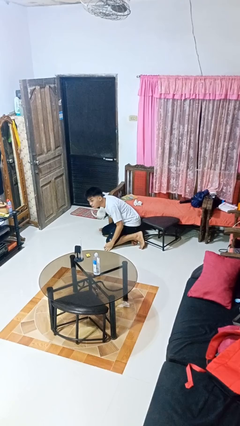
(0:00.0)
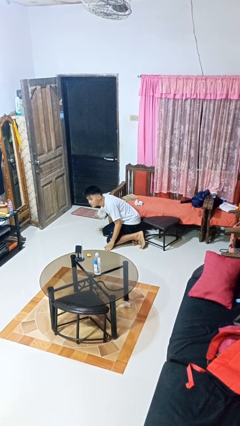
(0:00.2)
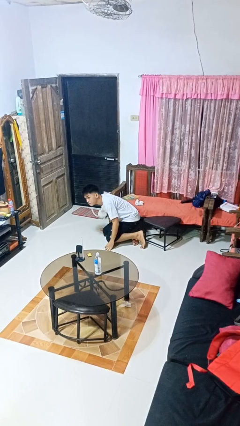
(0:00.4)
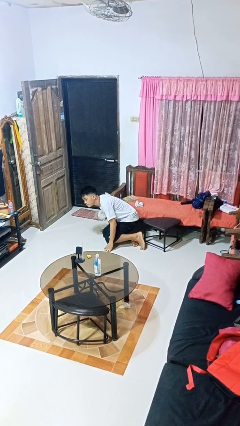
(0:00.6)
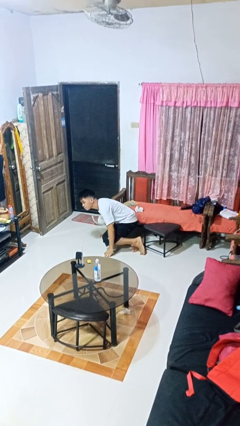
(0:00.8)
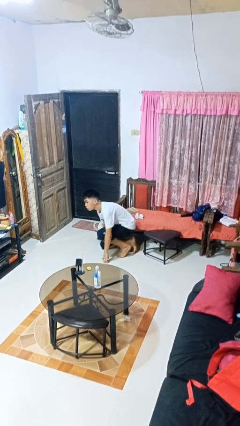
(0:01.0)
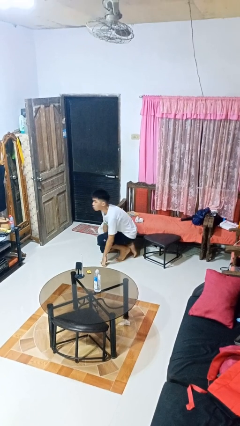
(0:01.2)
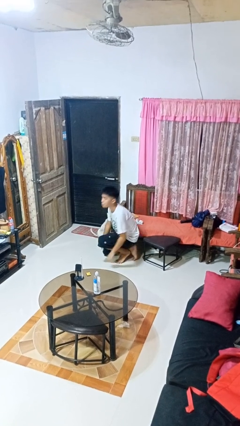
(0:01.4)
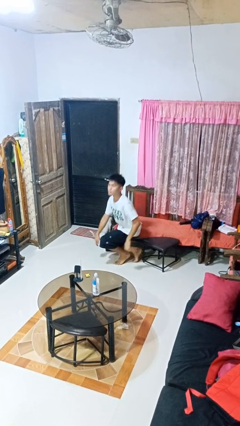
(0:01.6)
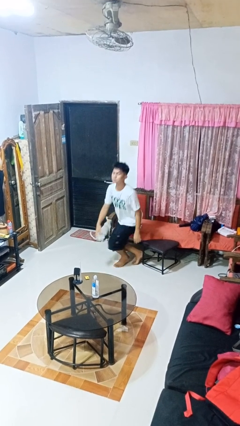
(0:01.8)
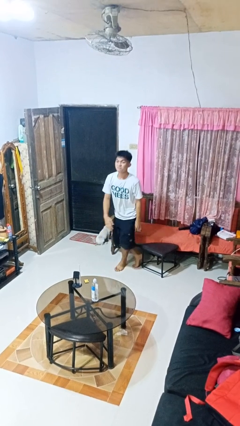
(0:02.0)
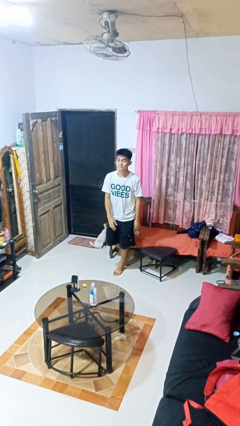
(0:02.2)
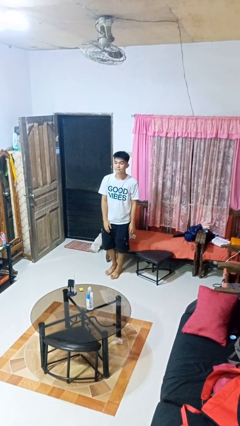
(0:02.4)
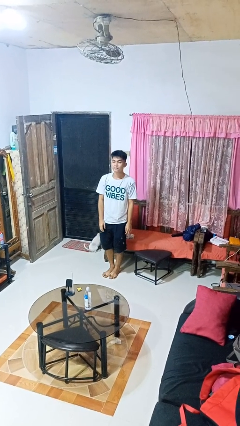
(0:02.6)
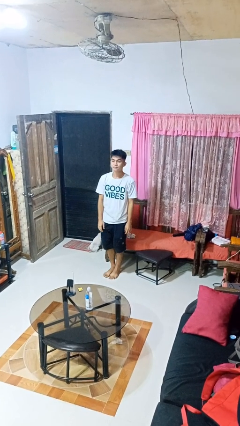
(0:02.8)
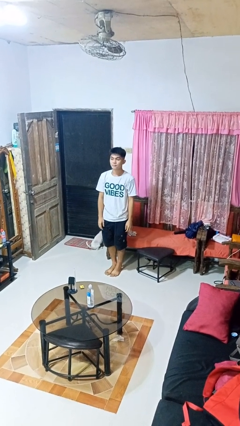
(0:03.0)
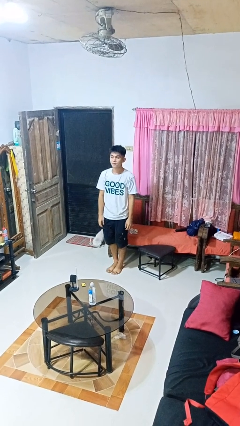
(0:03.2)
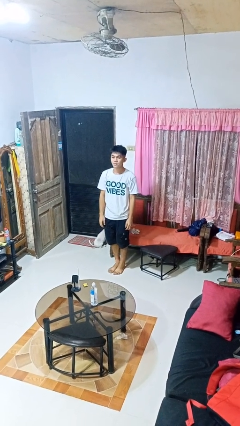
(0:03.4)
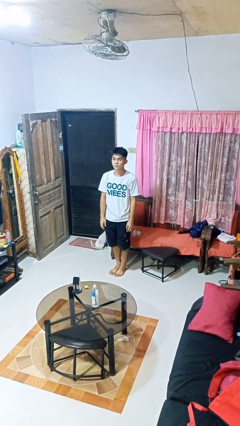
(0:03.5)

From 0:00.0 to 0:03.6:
person stands up from floor

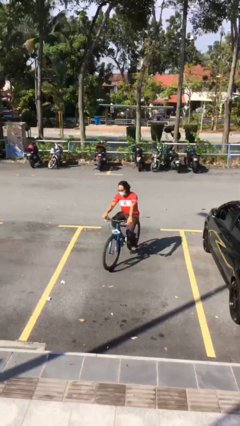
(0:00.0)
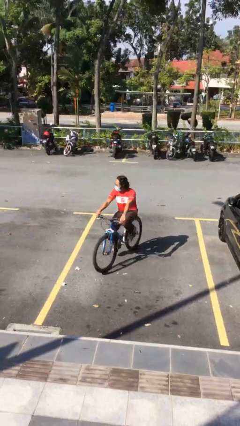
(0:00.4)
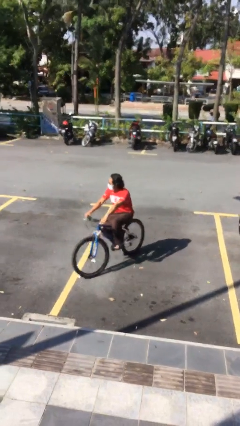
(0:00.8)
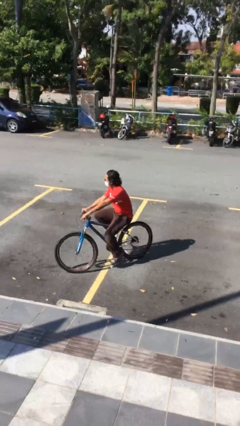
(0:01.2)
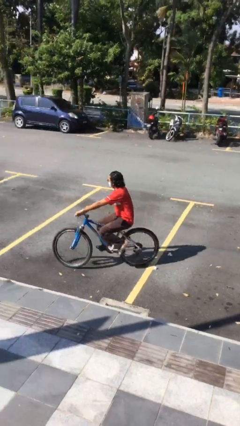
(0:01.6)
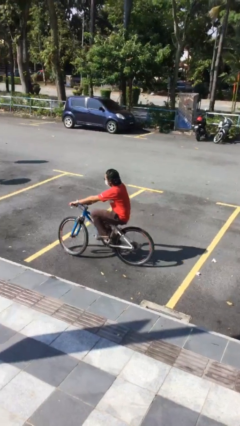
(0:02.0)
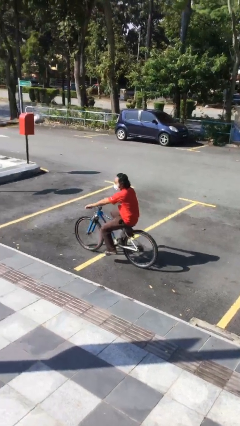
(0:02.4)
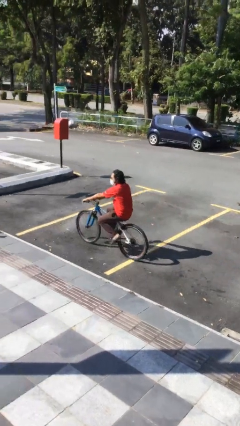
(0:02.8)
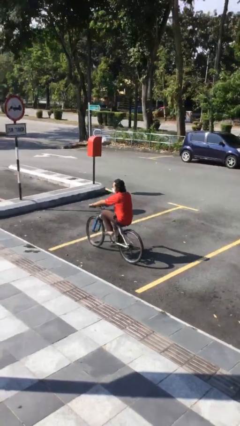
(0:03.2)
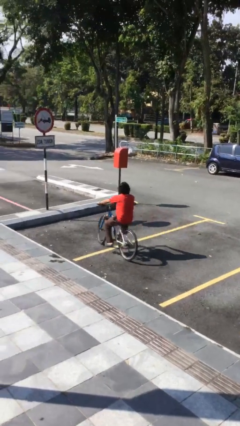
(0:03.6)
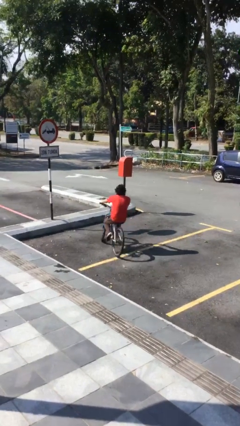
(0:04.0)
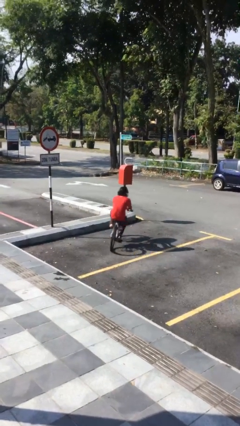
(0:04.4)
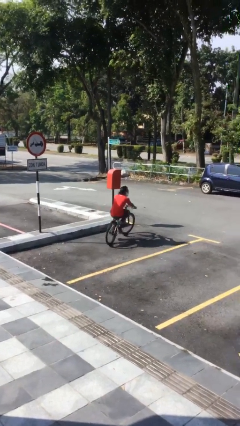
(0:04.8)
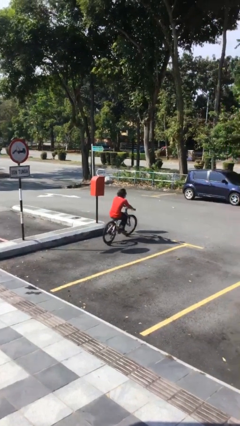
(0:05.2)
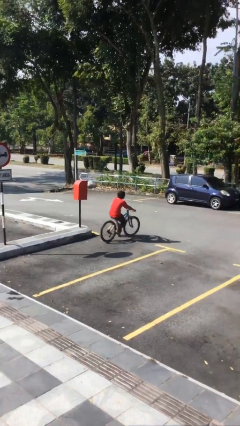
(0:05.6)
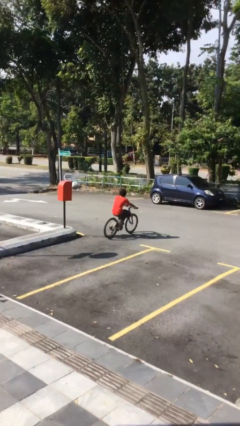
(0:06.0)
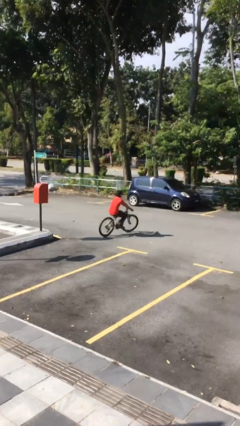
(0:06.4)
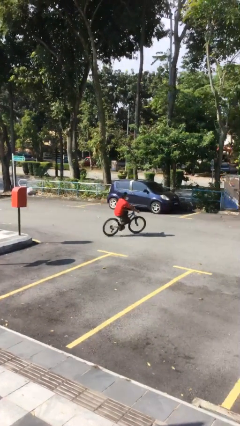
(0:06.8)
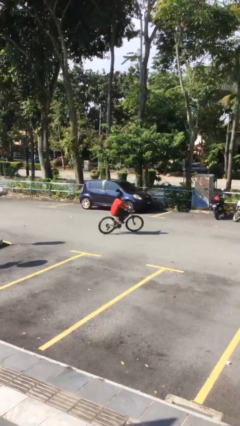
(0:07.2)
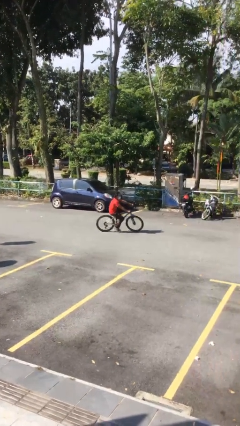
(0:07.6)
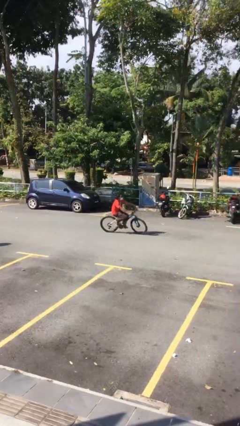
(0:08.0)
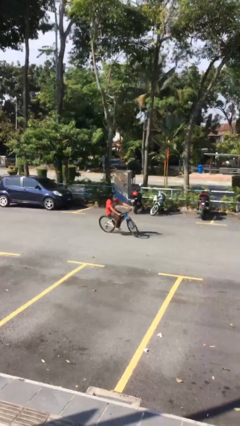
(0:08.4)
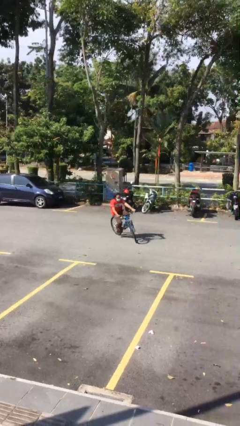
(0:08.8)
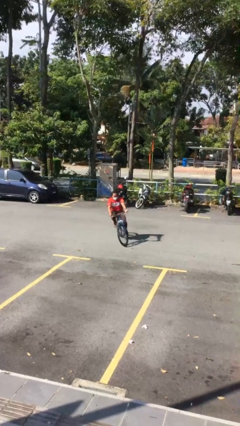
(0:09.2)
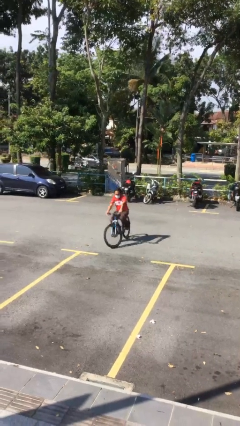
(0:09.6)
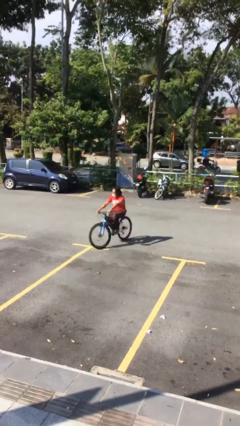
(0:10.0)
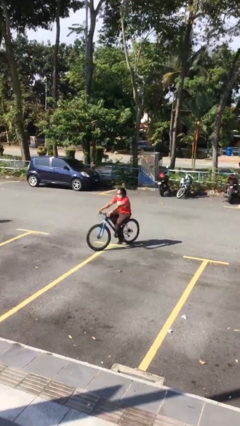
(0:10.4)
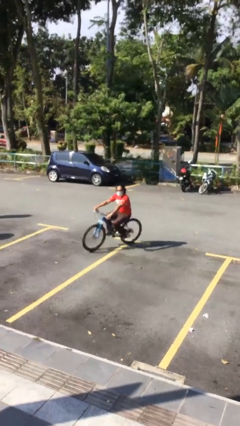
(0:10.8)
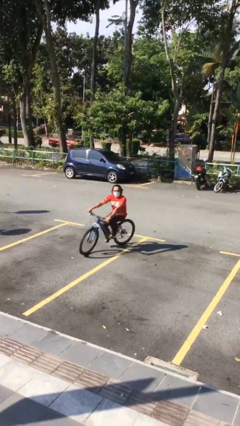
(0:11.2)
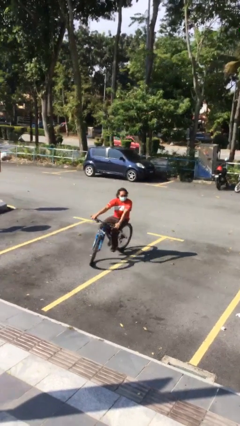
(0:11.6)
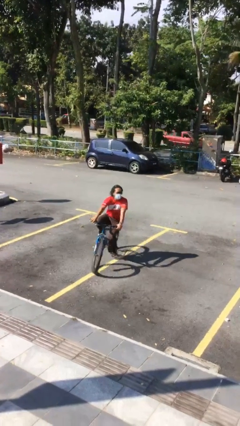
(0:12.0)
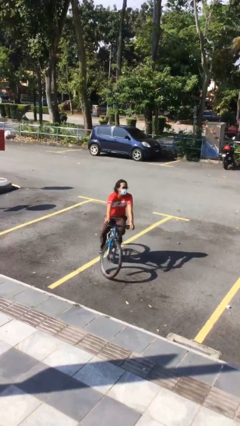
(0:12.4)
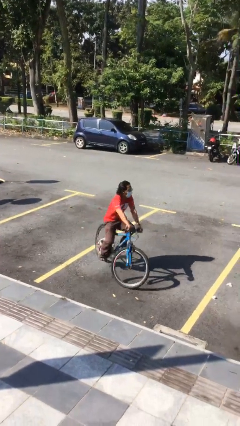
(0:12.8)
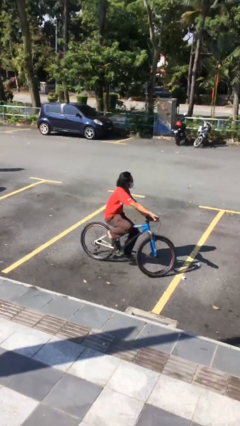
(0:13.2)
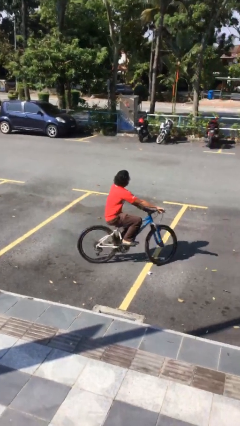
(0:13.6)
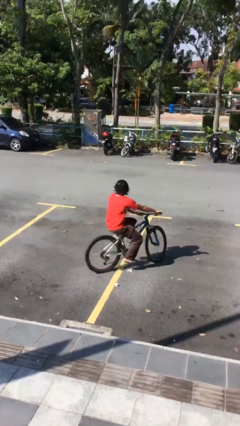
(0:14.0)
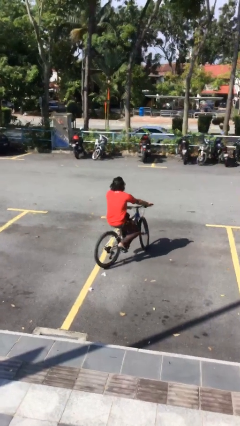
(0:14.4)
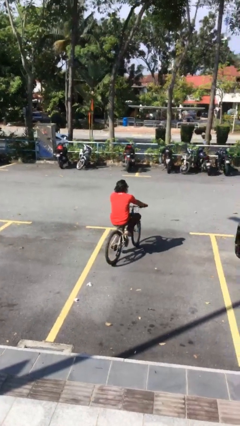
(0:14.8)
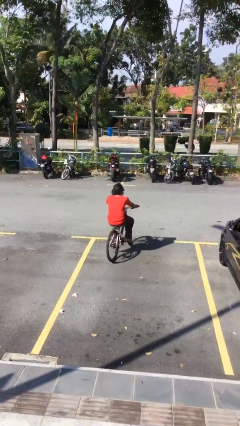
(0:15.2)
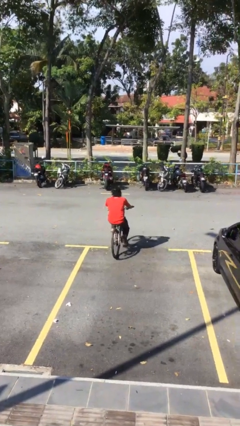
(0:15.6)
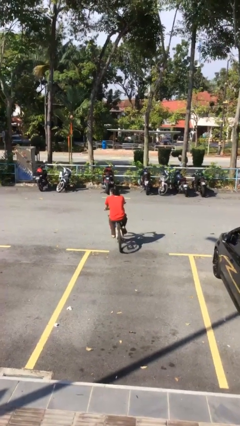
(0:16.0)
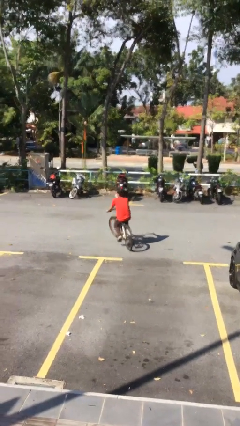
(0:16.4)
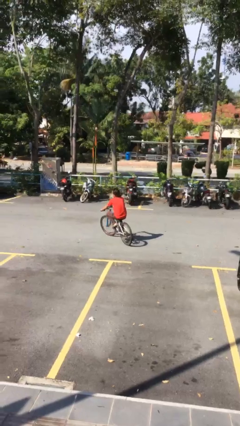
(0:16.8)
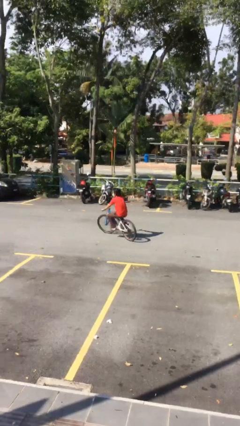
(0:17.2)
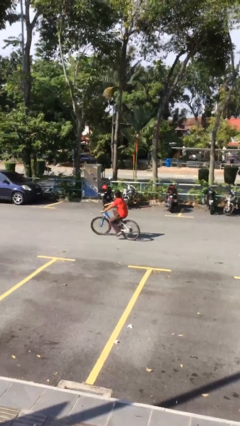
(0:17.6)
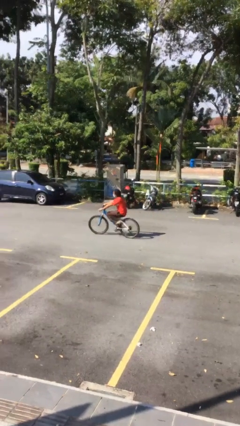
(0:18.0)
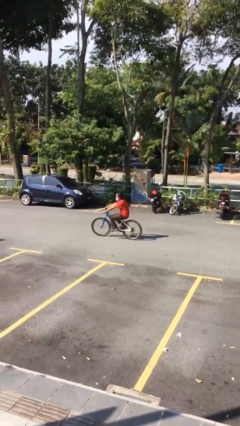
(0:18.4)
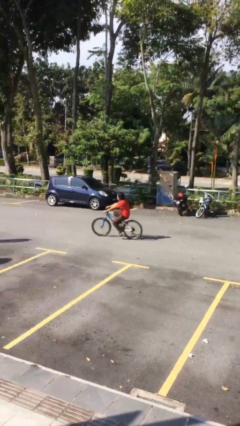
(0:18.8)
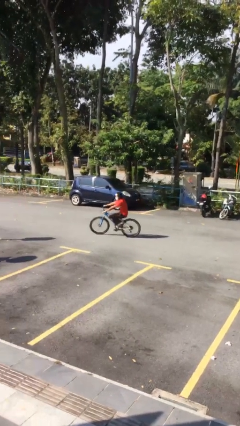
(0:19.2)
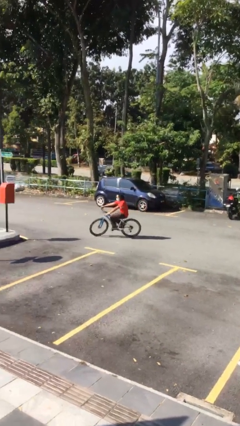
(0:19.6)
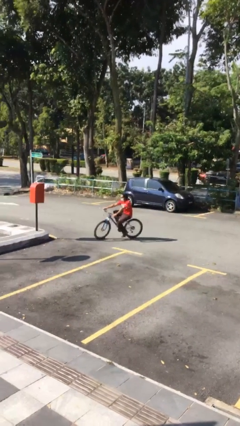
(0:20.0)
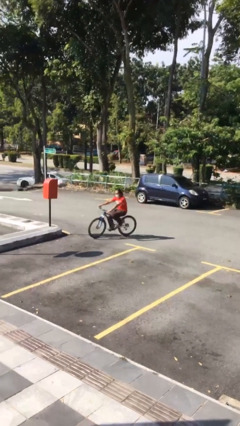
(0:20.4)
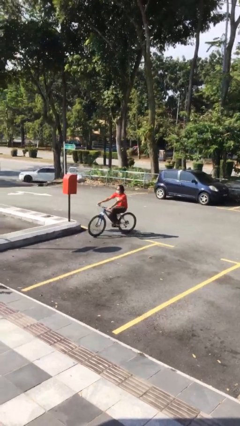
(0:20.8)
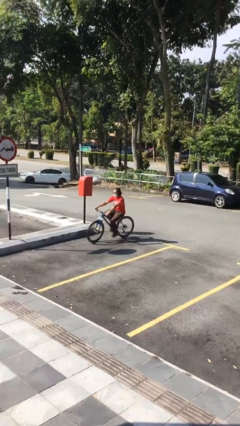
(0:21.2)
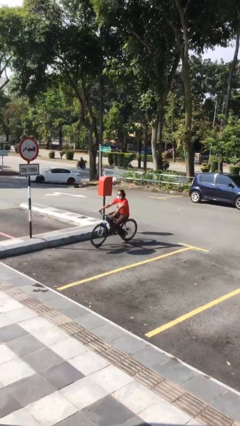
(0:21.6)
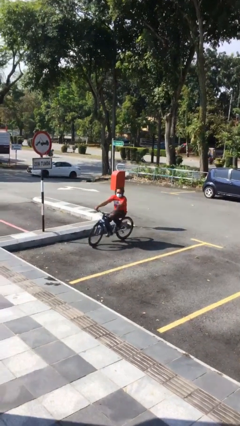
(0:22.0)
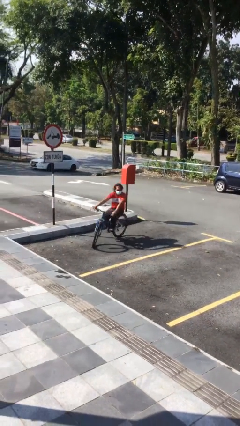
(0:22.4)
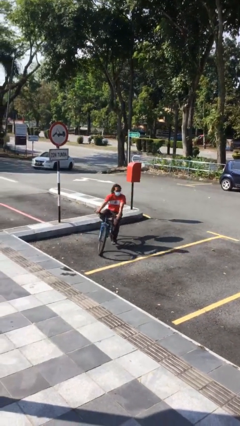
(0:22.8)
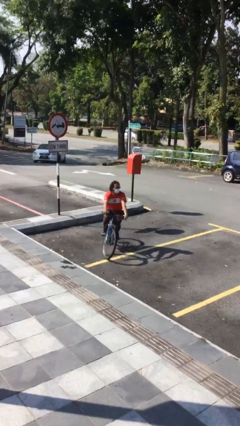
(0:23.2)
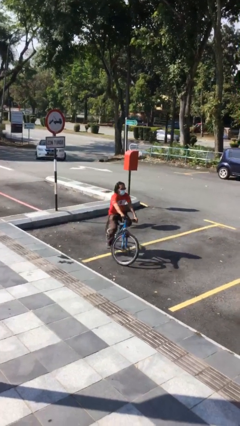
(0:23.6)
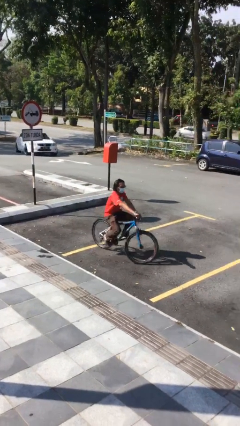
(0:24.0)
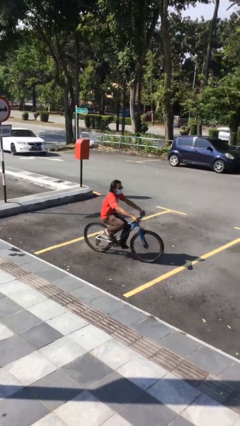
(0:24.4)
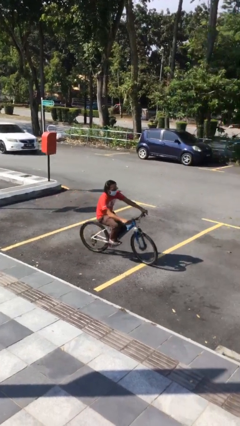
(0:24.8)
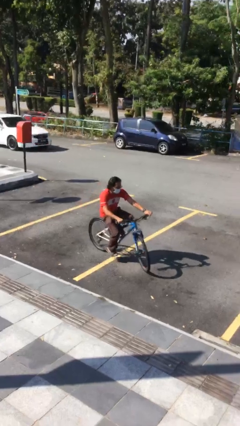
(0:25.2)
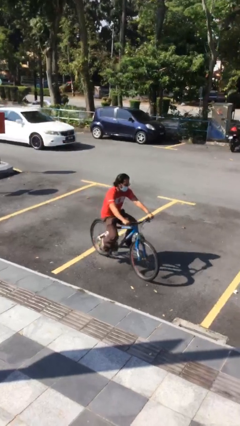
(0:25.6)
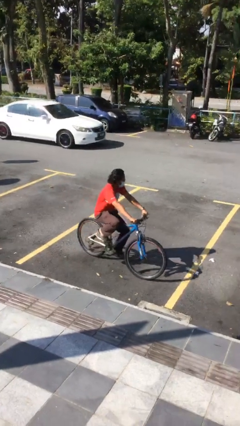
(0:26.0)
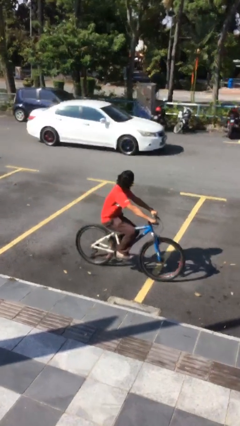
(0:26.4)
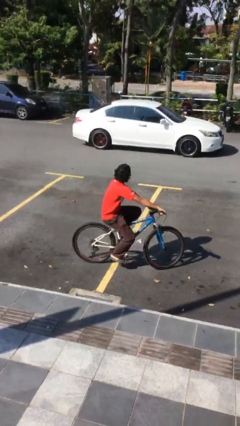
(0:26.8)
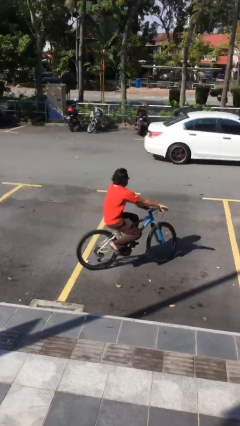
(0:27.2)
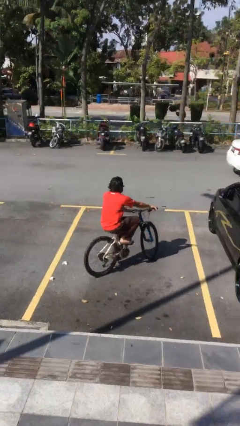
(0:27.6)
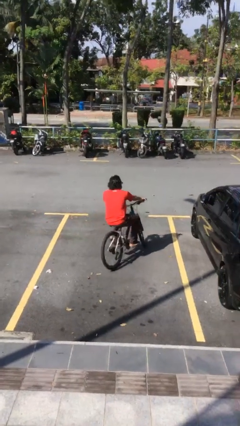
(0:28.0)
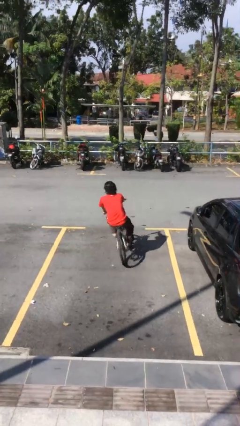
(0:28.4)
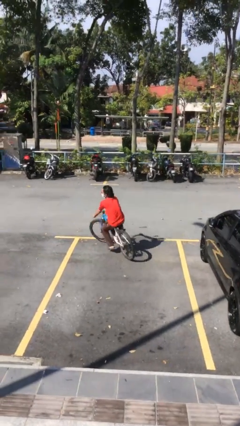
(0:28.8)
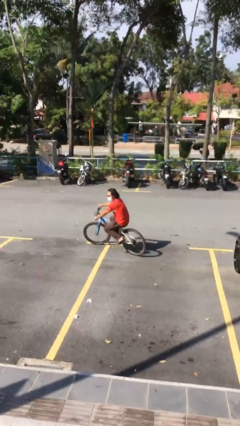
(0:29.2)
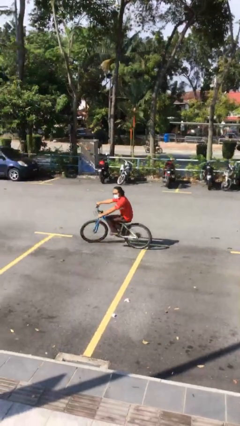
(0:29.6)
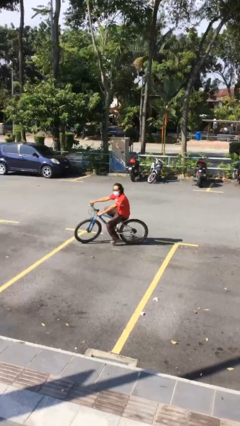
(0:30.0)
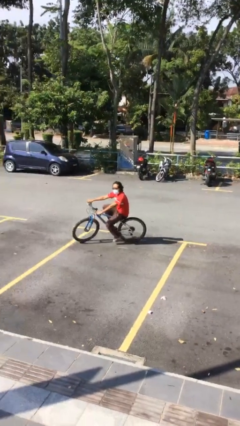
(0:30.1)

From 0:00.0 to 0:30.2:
person rides bicycle
